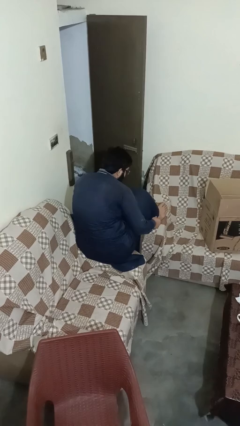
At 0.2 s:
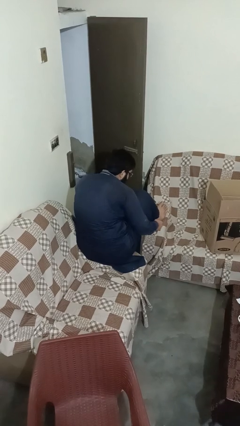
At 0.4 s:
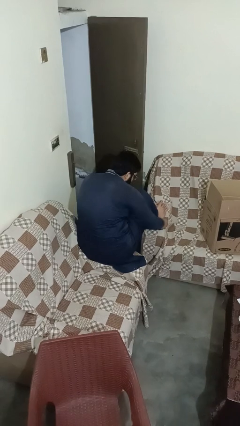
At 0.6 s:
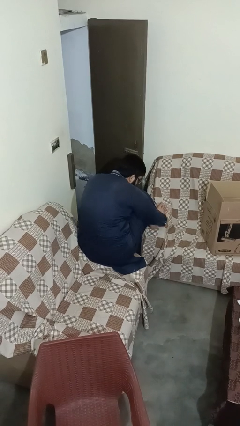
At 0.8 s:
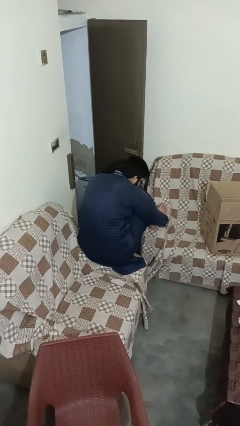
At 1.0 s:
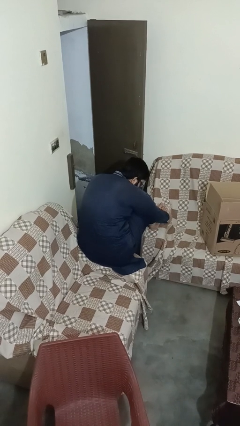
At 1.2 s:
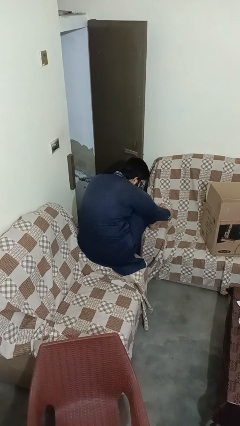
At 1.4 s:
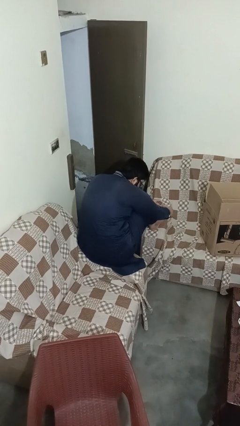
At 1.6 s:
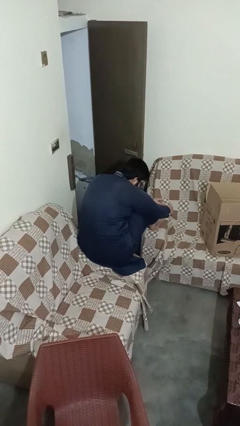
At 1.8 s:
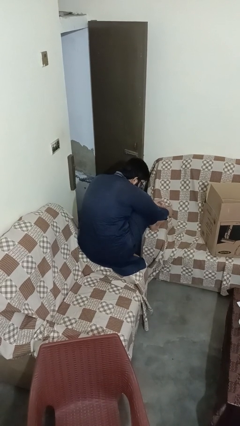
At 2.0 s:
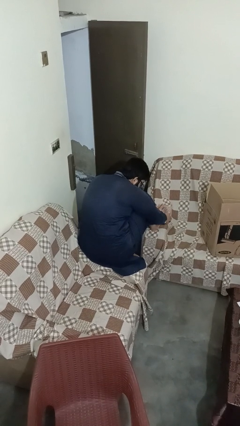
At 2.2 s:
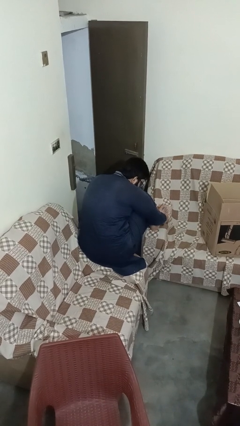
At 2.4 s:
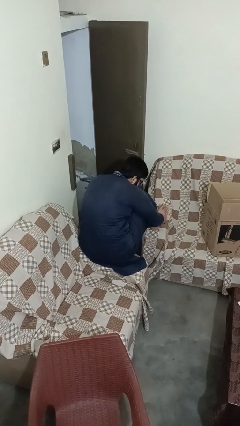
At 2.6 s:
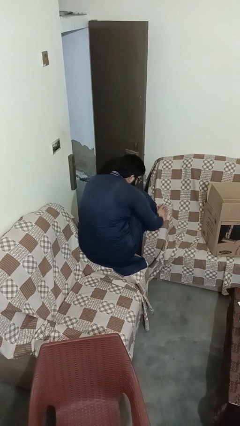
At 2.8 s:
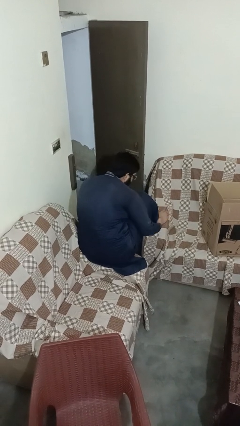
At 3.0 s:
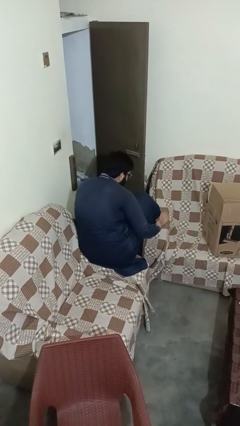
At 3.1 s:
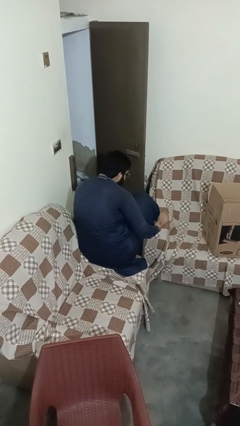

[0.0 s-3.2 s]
person rubs foot

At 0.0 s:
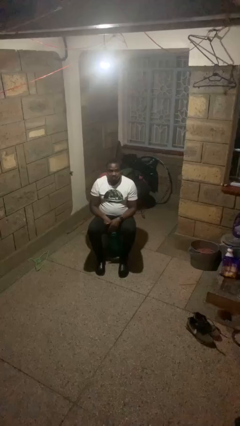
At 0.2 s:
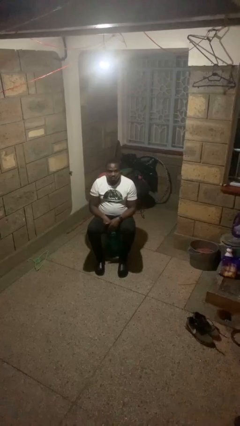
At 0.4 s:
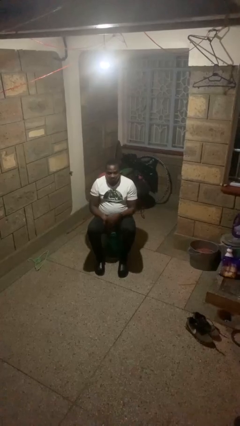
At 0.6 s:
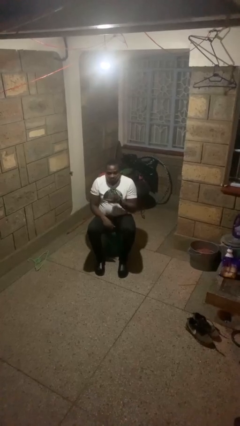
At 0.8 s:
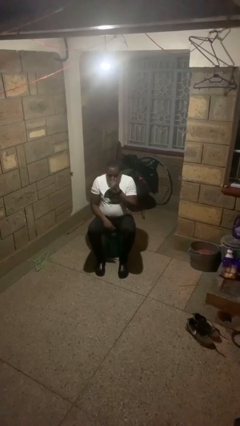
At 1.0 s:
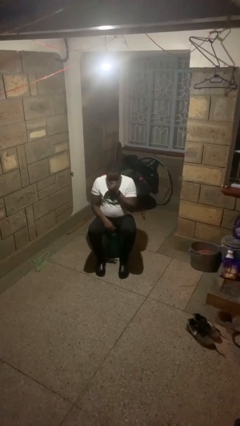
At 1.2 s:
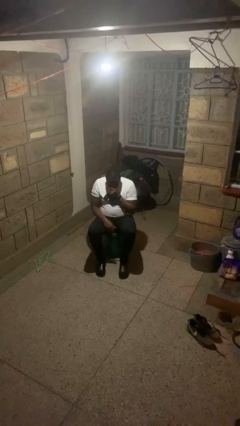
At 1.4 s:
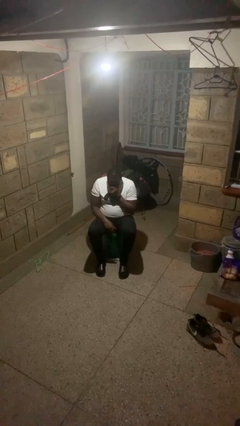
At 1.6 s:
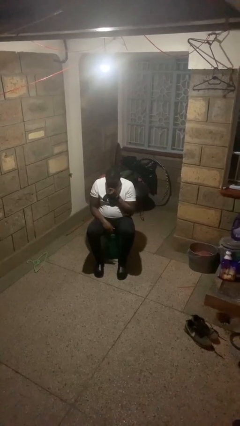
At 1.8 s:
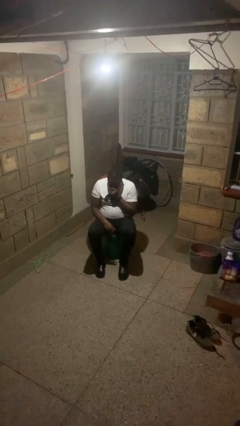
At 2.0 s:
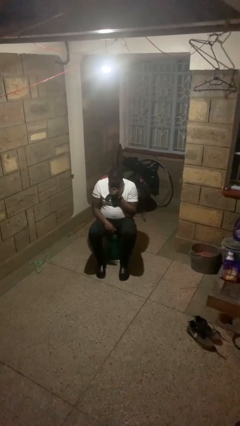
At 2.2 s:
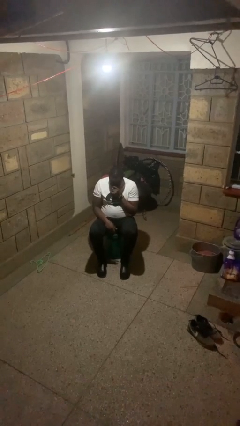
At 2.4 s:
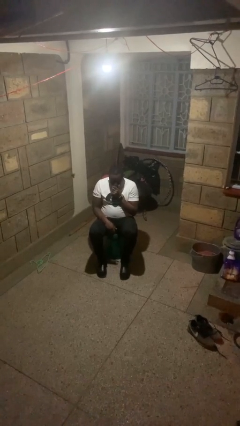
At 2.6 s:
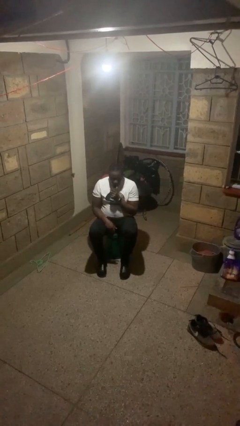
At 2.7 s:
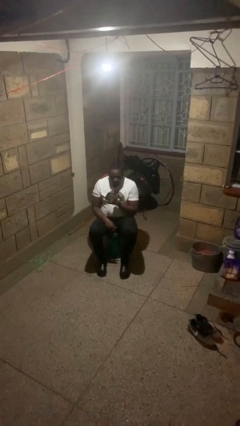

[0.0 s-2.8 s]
person sneezes into hand

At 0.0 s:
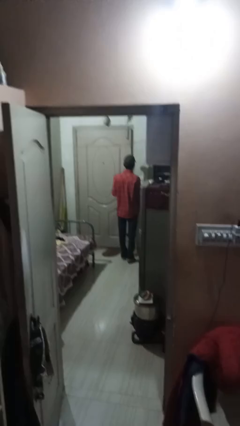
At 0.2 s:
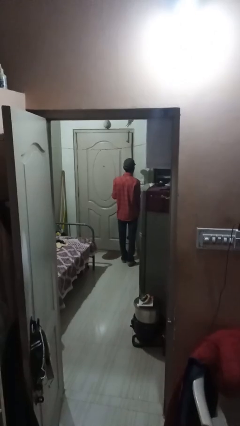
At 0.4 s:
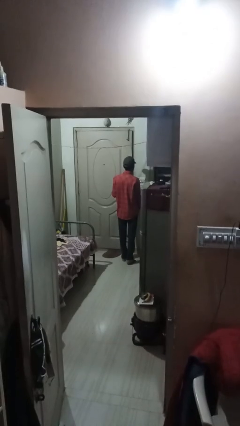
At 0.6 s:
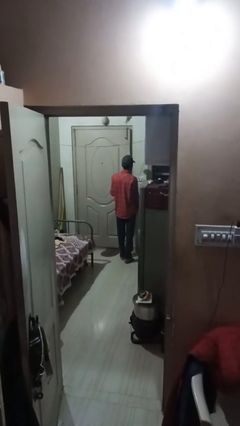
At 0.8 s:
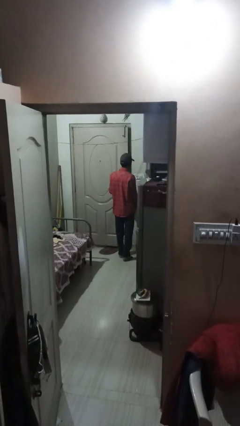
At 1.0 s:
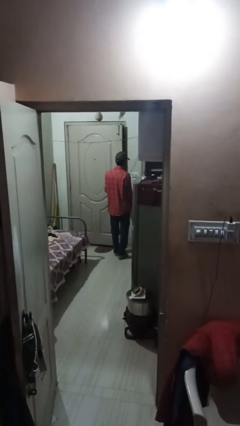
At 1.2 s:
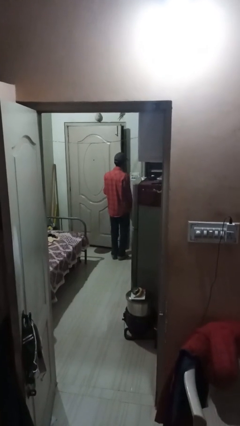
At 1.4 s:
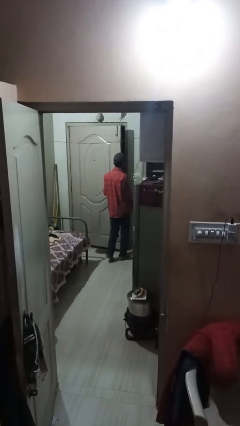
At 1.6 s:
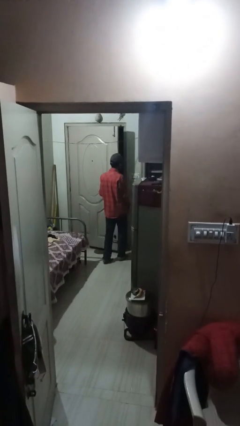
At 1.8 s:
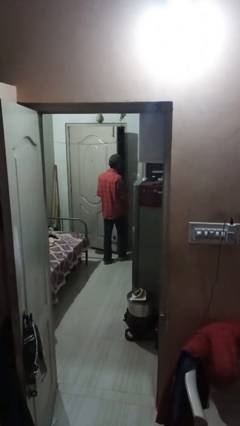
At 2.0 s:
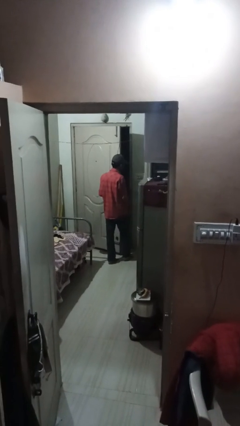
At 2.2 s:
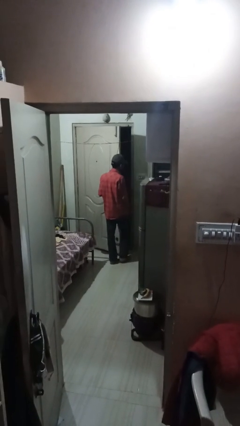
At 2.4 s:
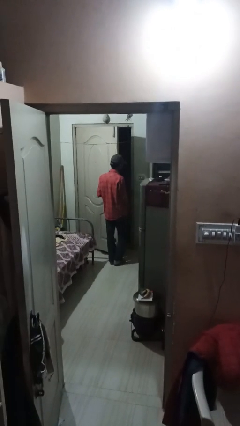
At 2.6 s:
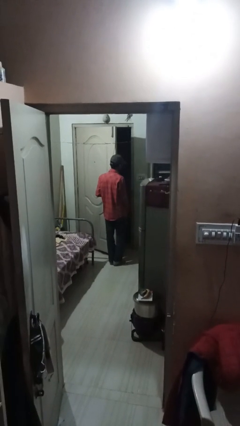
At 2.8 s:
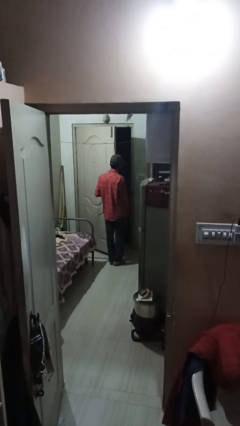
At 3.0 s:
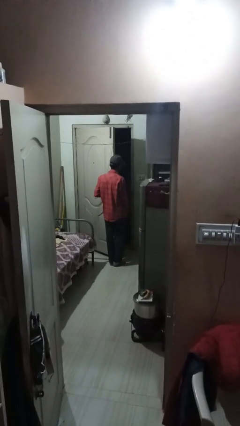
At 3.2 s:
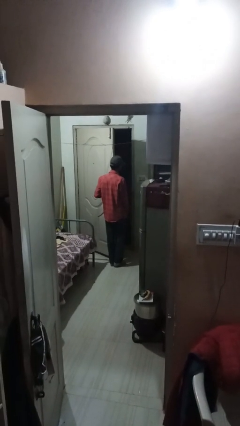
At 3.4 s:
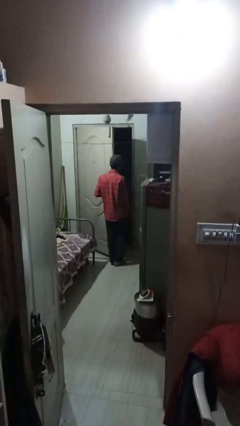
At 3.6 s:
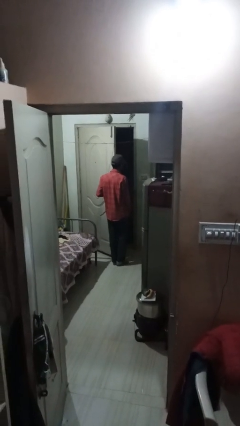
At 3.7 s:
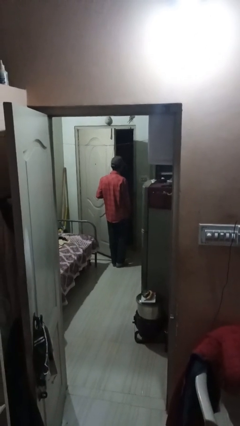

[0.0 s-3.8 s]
person opens facility door

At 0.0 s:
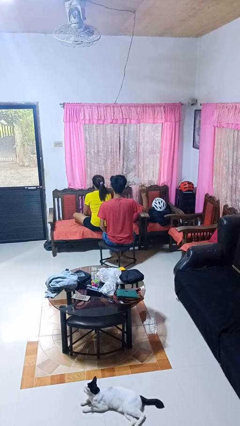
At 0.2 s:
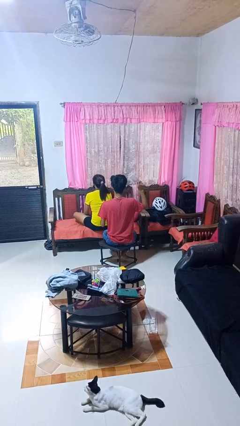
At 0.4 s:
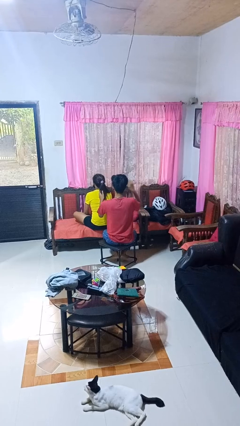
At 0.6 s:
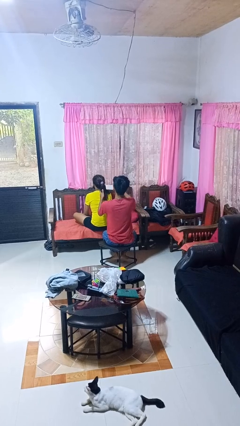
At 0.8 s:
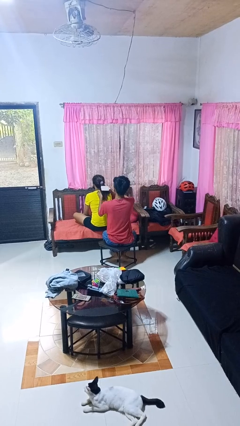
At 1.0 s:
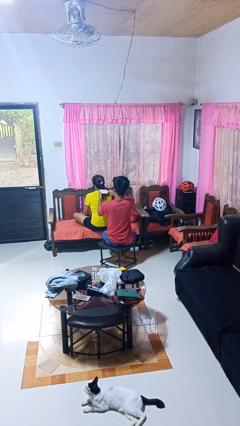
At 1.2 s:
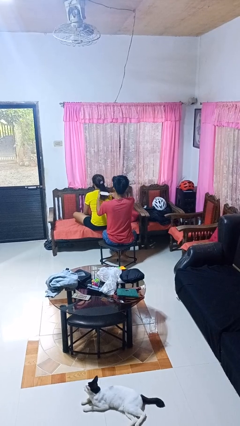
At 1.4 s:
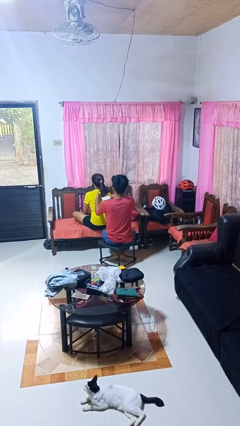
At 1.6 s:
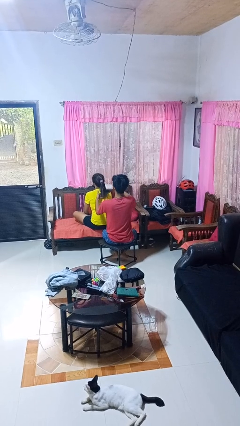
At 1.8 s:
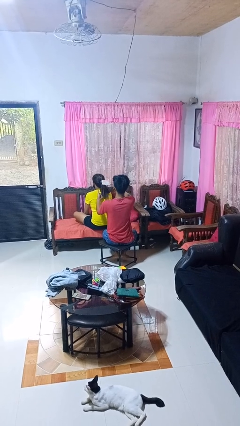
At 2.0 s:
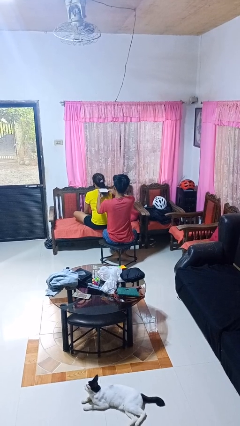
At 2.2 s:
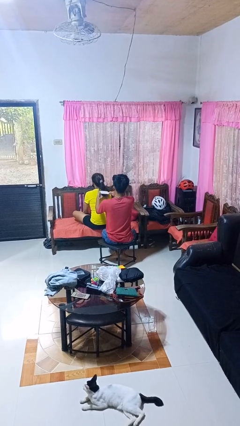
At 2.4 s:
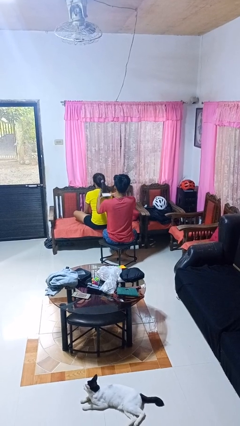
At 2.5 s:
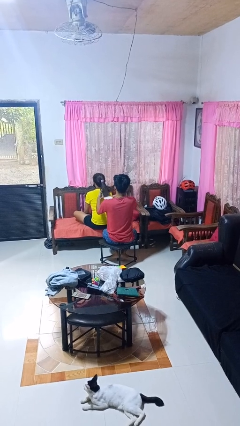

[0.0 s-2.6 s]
person brushes hair of person

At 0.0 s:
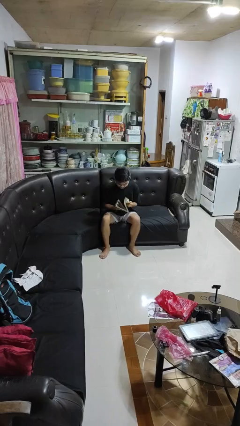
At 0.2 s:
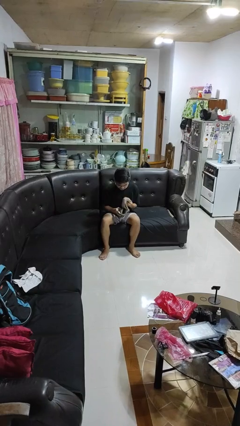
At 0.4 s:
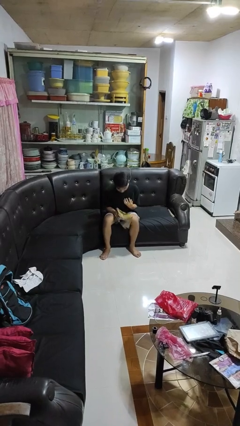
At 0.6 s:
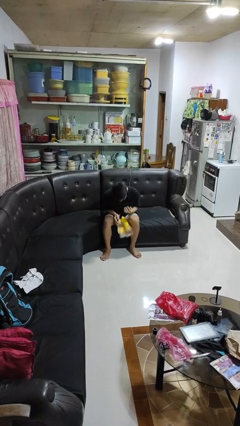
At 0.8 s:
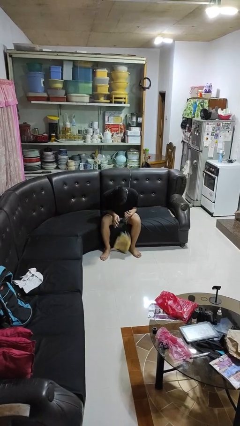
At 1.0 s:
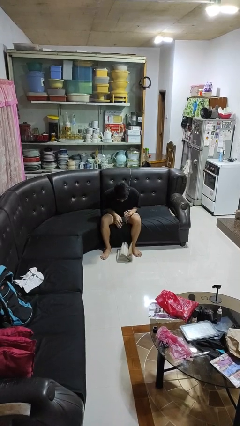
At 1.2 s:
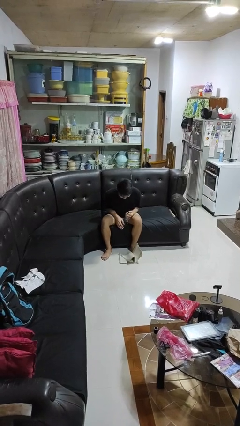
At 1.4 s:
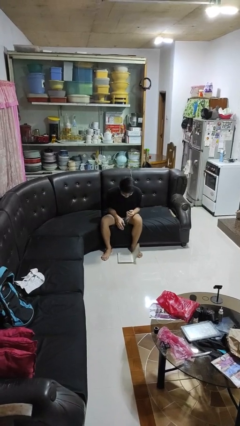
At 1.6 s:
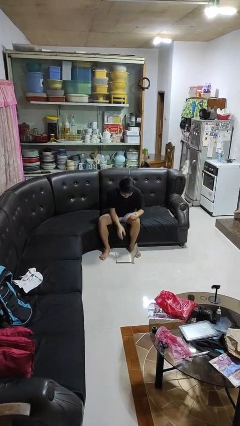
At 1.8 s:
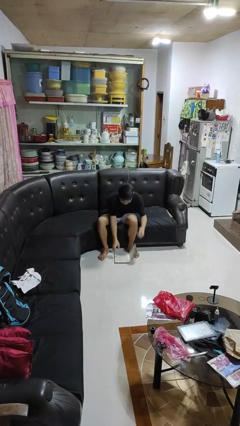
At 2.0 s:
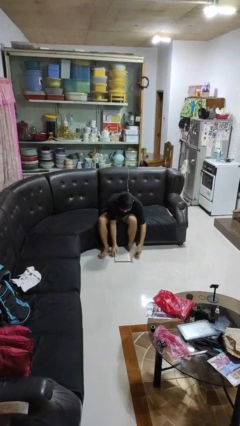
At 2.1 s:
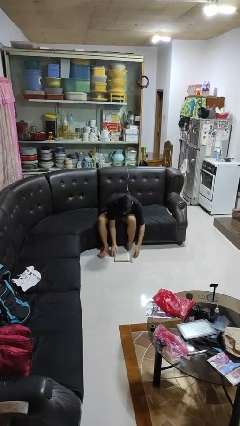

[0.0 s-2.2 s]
person drops object

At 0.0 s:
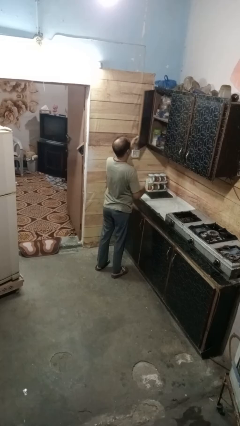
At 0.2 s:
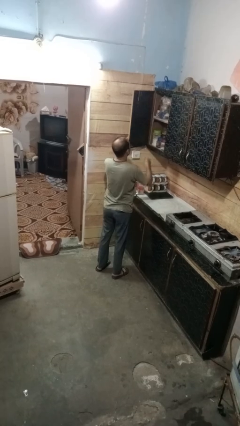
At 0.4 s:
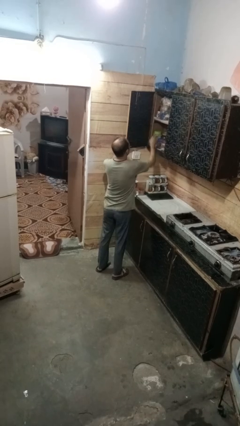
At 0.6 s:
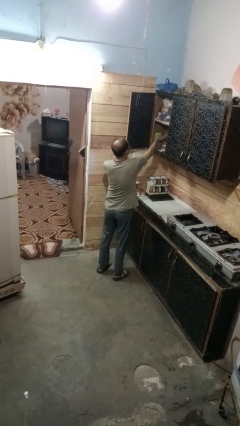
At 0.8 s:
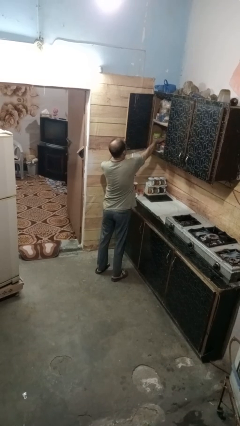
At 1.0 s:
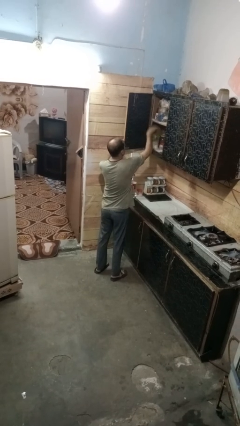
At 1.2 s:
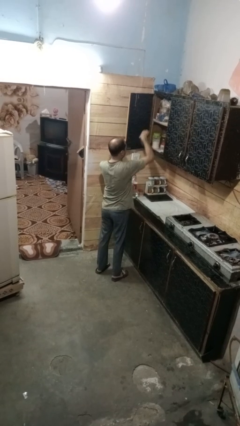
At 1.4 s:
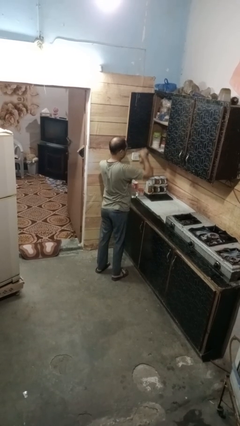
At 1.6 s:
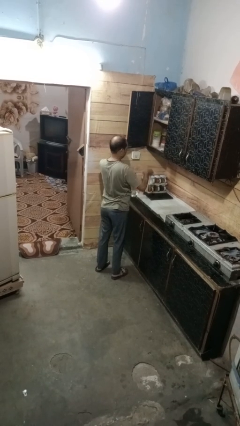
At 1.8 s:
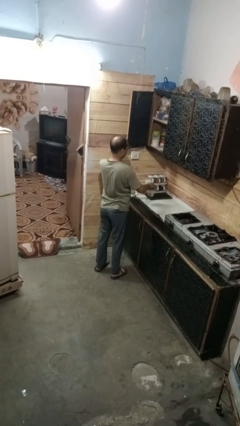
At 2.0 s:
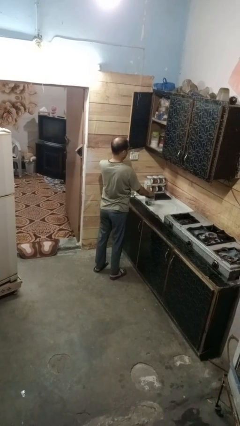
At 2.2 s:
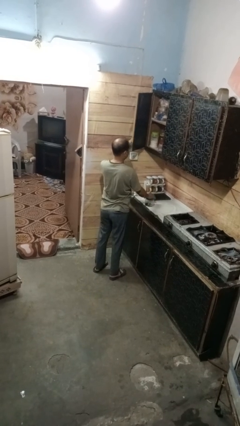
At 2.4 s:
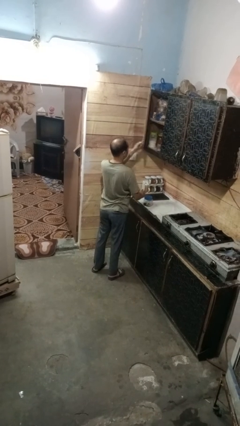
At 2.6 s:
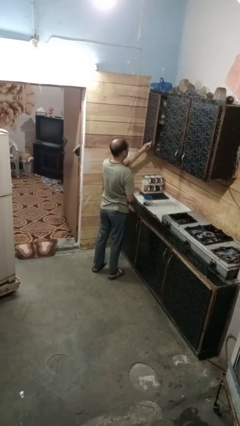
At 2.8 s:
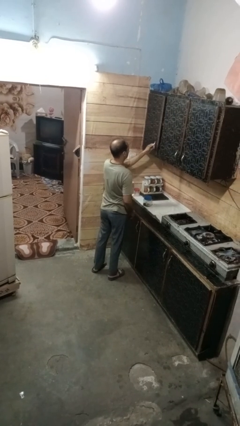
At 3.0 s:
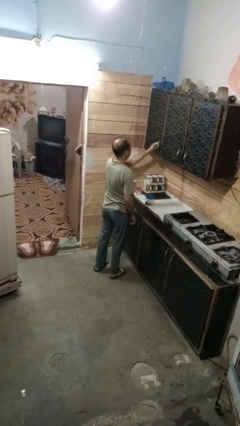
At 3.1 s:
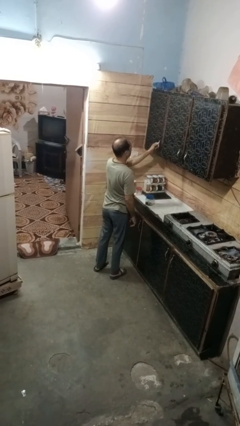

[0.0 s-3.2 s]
person takes object from cabinet
